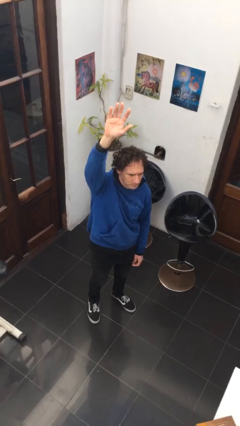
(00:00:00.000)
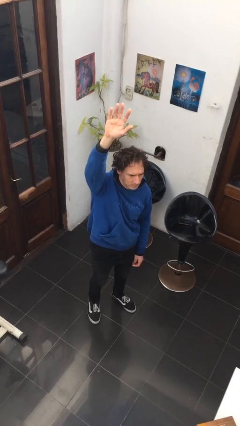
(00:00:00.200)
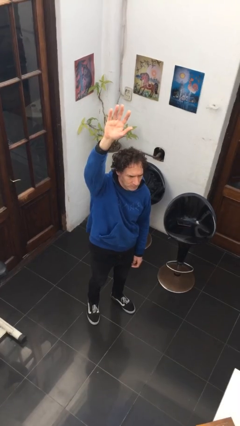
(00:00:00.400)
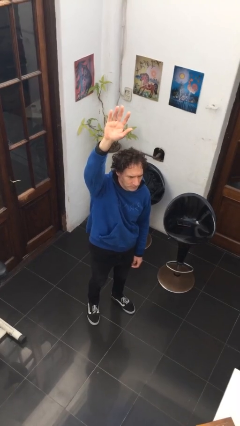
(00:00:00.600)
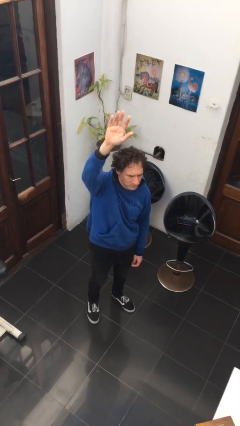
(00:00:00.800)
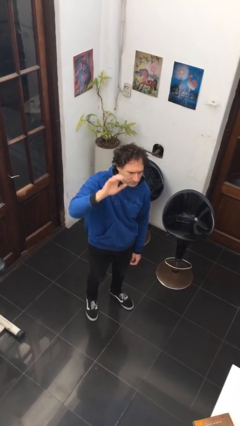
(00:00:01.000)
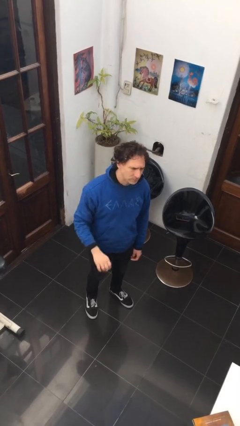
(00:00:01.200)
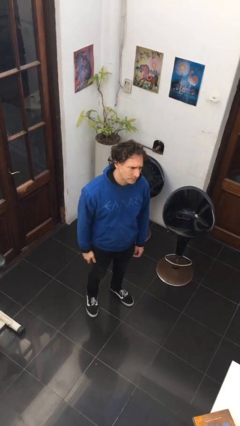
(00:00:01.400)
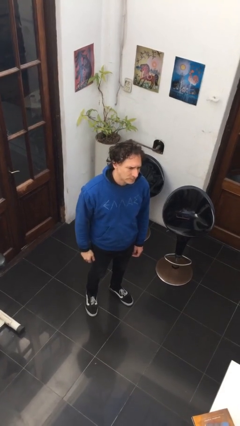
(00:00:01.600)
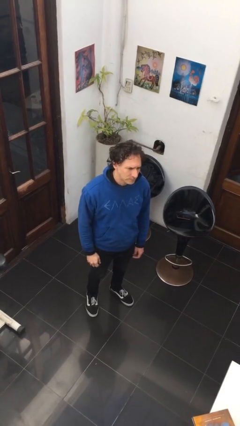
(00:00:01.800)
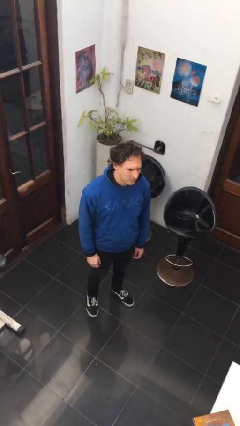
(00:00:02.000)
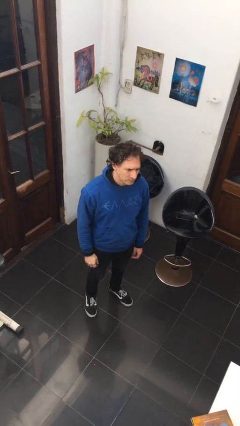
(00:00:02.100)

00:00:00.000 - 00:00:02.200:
person gestures lower hand

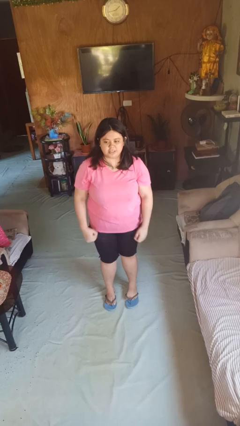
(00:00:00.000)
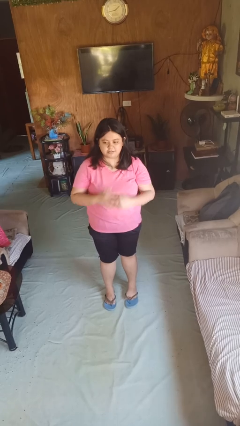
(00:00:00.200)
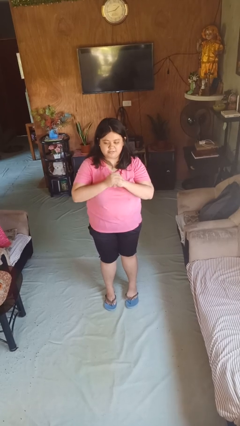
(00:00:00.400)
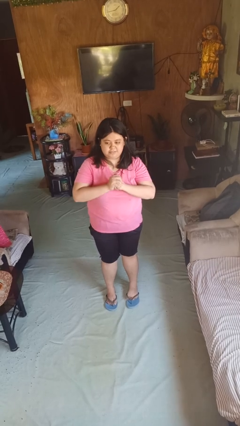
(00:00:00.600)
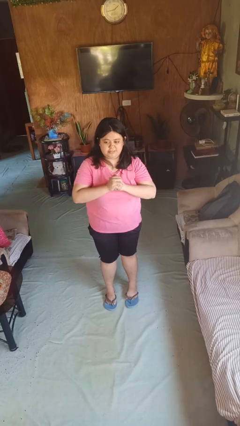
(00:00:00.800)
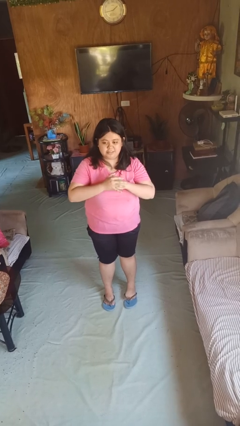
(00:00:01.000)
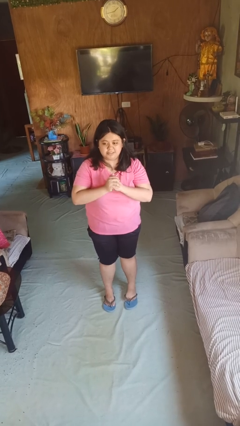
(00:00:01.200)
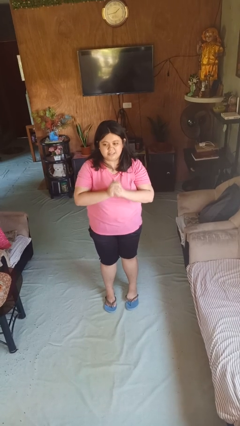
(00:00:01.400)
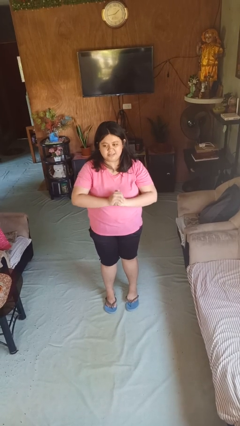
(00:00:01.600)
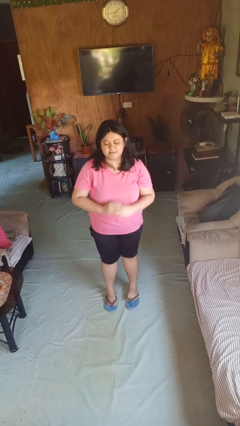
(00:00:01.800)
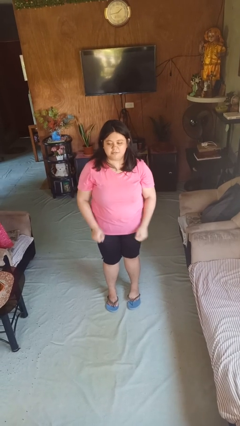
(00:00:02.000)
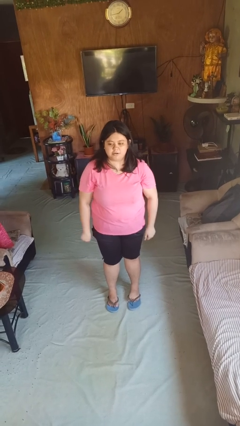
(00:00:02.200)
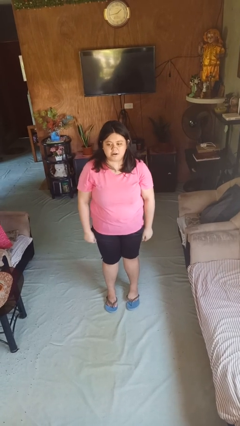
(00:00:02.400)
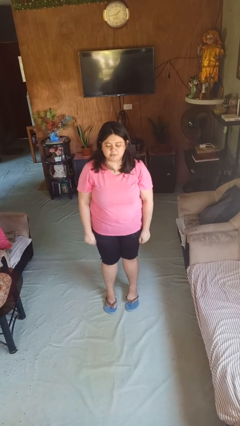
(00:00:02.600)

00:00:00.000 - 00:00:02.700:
person cracks knuckles

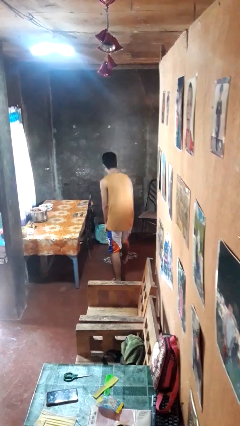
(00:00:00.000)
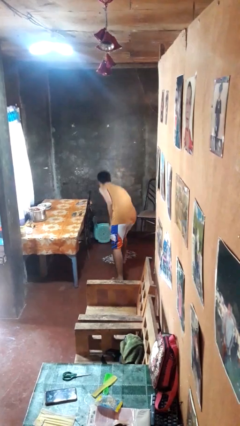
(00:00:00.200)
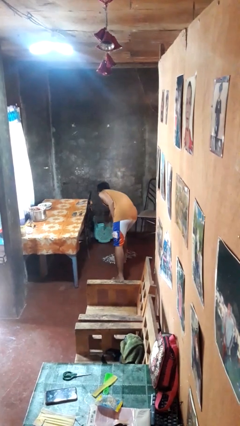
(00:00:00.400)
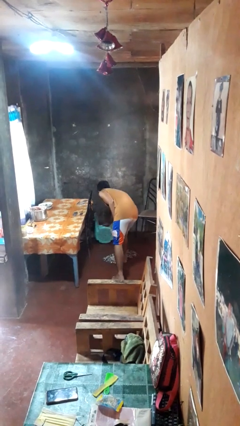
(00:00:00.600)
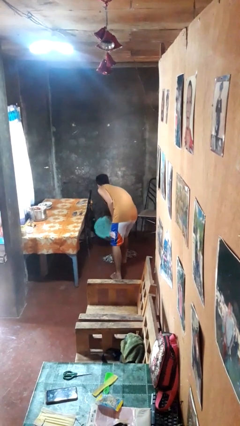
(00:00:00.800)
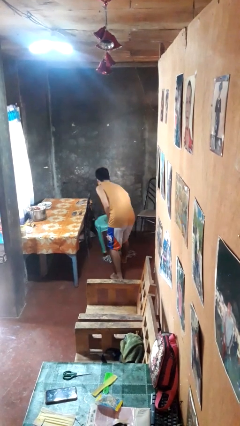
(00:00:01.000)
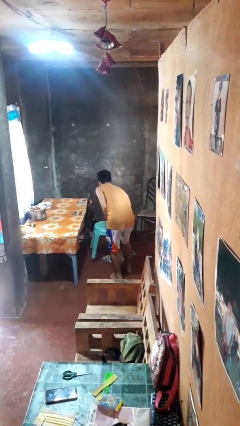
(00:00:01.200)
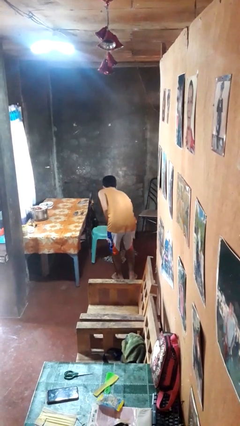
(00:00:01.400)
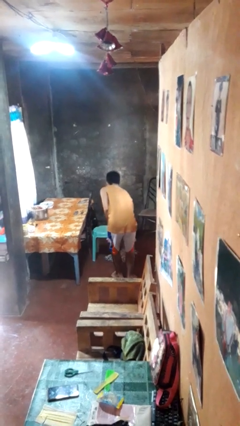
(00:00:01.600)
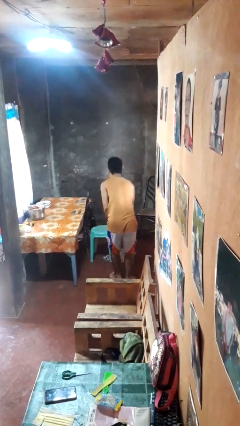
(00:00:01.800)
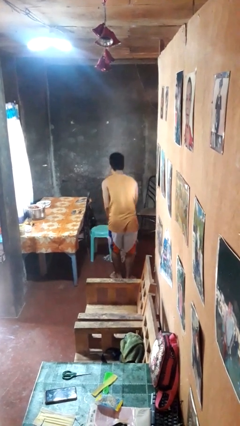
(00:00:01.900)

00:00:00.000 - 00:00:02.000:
person sets upright furniture

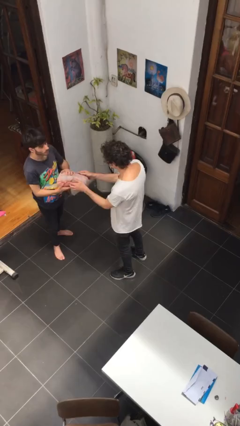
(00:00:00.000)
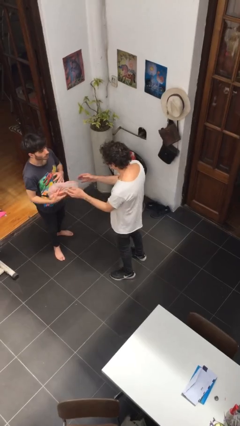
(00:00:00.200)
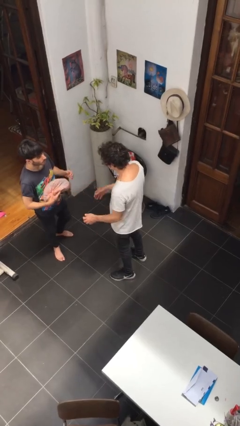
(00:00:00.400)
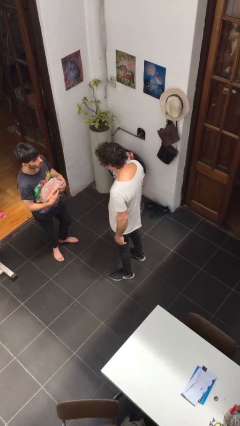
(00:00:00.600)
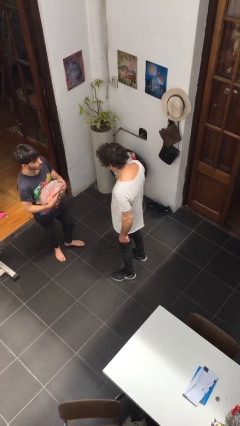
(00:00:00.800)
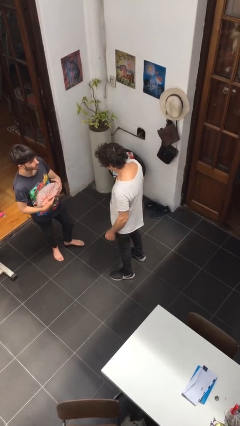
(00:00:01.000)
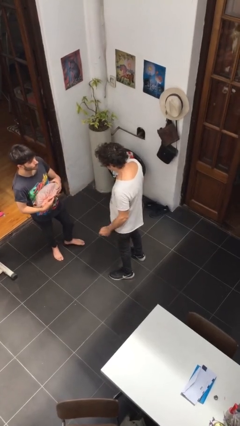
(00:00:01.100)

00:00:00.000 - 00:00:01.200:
person transfers object to person

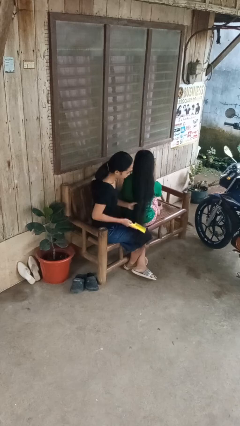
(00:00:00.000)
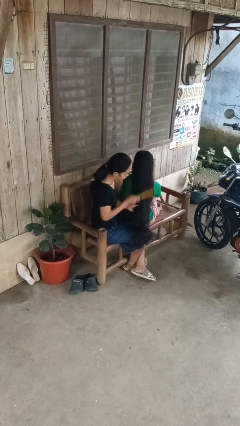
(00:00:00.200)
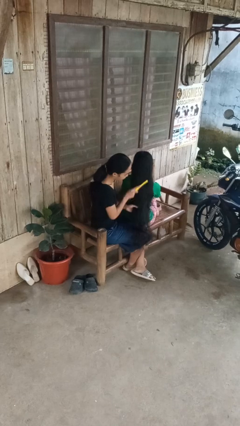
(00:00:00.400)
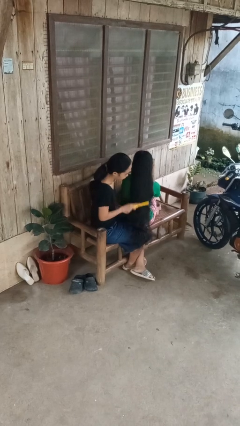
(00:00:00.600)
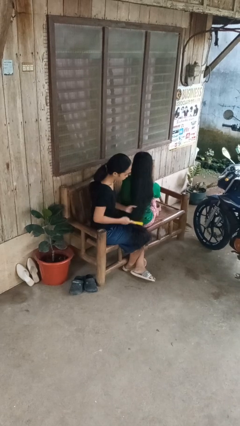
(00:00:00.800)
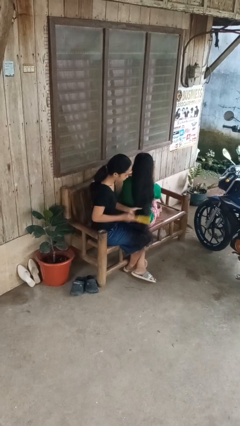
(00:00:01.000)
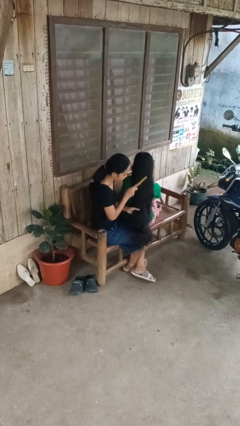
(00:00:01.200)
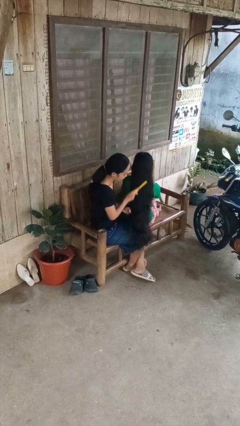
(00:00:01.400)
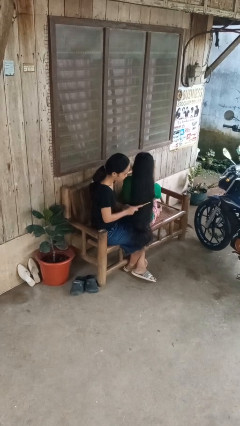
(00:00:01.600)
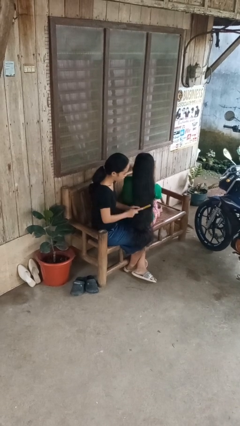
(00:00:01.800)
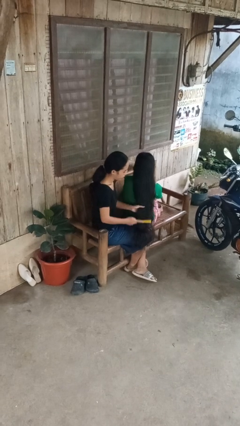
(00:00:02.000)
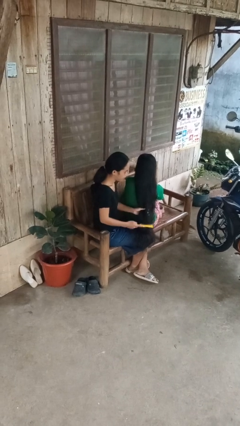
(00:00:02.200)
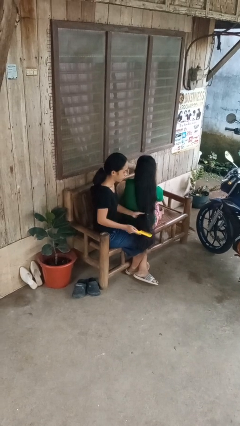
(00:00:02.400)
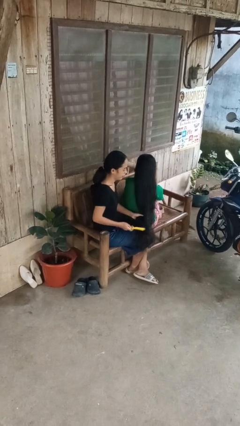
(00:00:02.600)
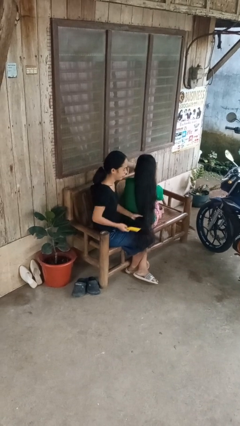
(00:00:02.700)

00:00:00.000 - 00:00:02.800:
person brushes hair of person

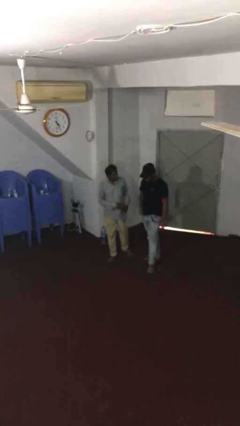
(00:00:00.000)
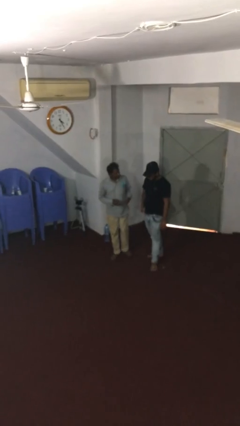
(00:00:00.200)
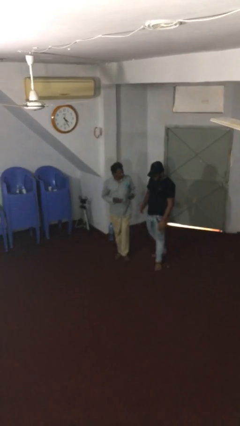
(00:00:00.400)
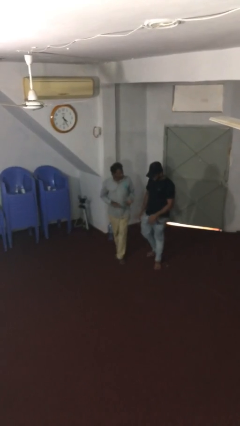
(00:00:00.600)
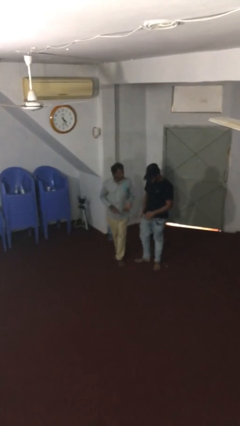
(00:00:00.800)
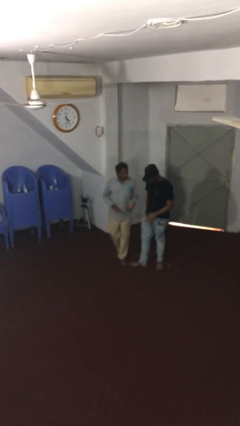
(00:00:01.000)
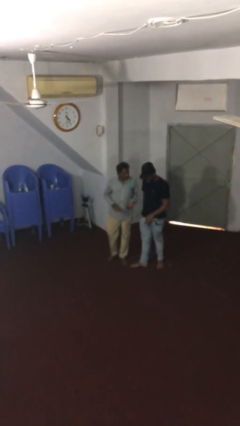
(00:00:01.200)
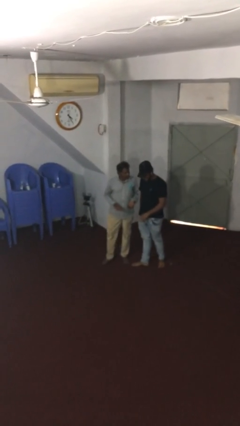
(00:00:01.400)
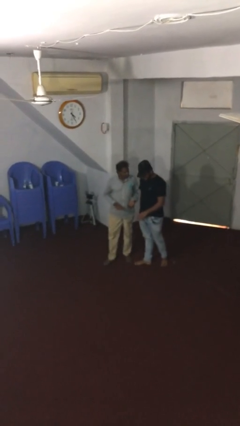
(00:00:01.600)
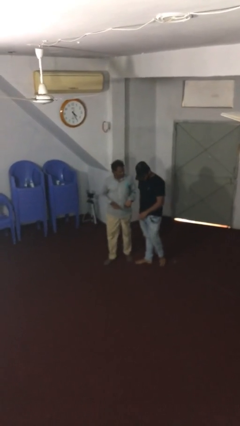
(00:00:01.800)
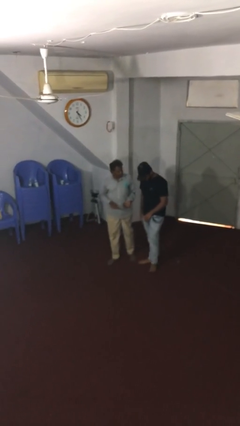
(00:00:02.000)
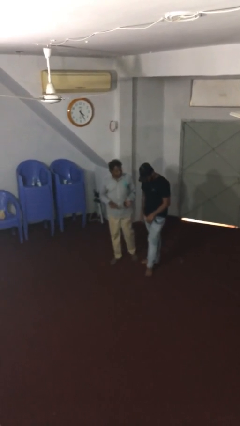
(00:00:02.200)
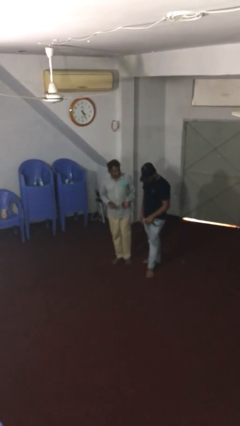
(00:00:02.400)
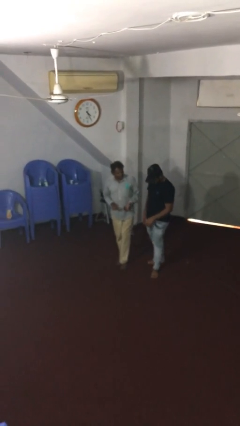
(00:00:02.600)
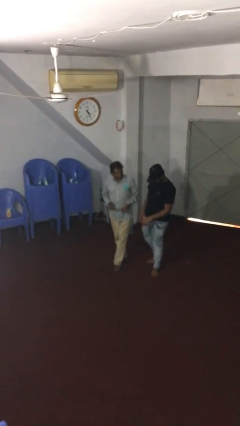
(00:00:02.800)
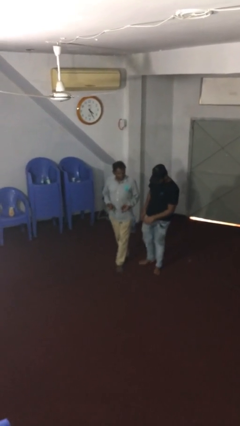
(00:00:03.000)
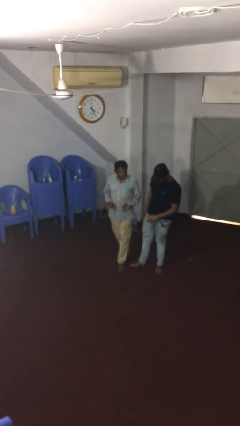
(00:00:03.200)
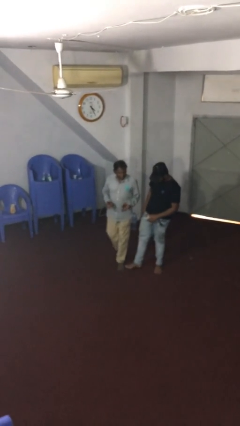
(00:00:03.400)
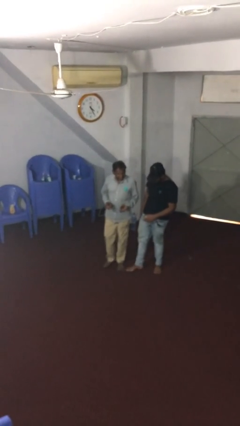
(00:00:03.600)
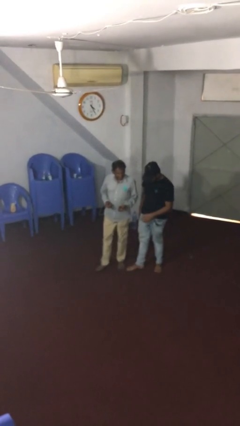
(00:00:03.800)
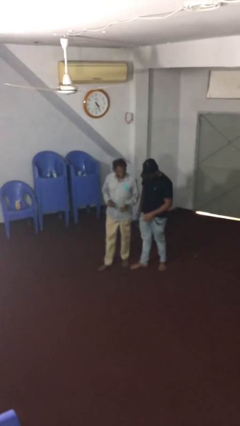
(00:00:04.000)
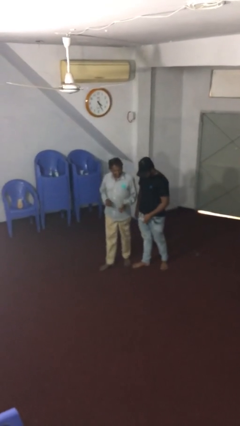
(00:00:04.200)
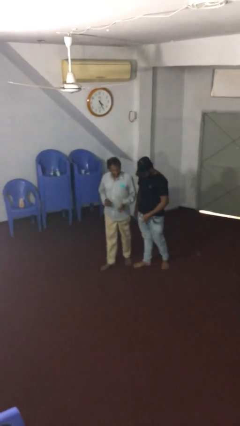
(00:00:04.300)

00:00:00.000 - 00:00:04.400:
person talks to person

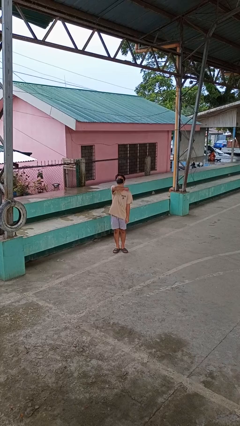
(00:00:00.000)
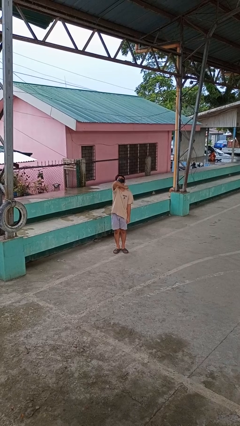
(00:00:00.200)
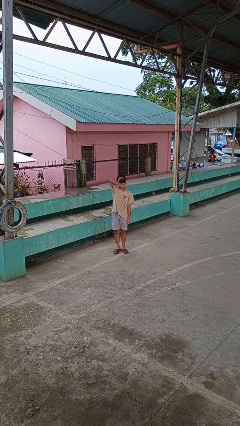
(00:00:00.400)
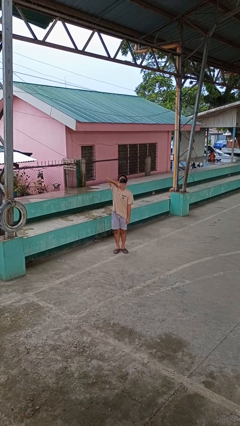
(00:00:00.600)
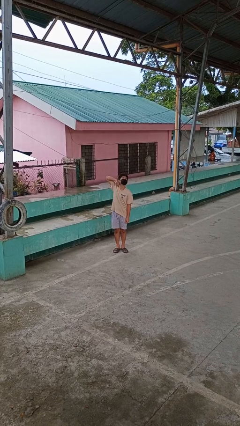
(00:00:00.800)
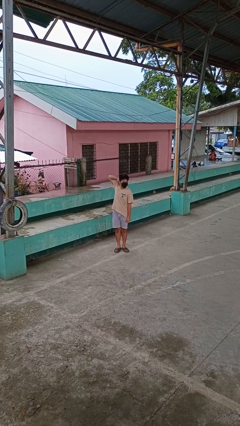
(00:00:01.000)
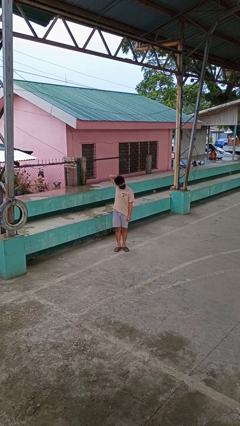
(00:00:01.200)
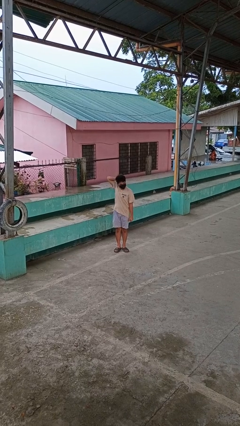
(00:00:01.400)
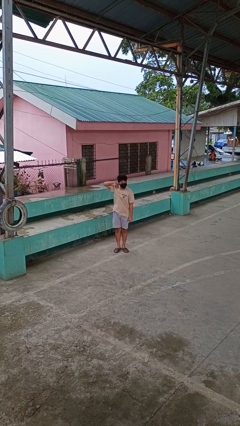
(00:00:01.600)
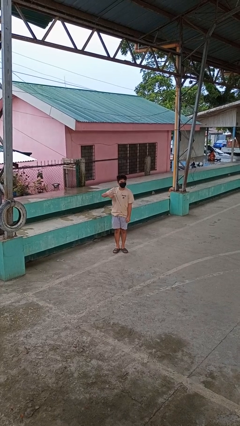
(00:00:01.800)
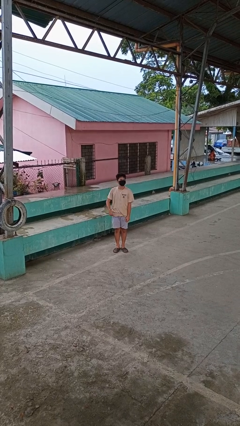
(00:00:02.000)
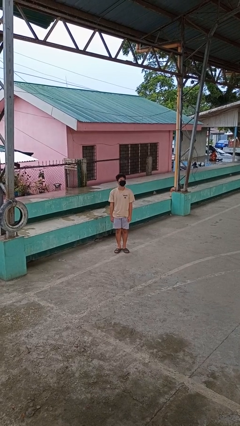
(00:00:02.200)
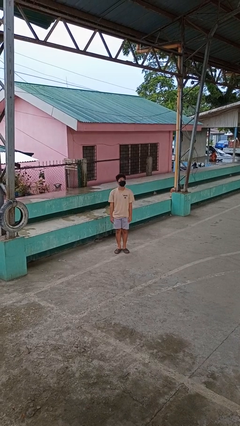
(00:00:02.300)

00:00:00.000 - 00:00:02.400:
person gestures cut
